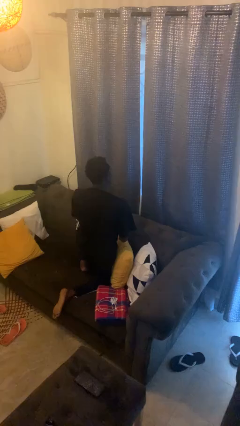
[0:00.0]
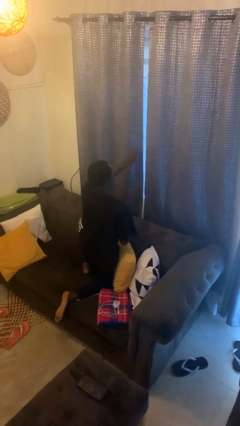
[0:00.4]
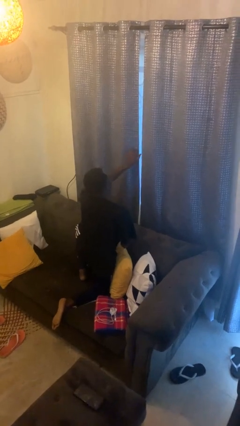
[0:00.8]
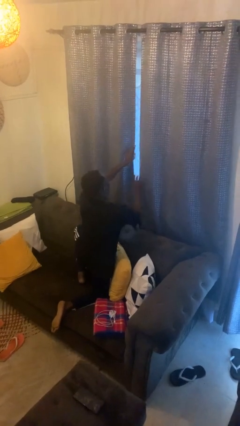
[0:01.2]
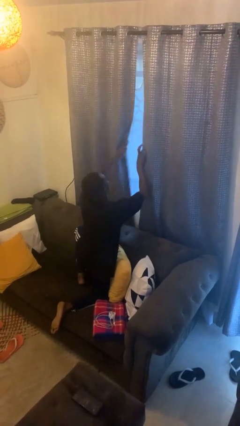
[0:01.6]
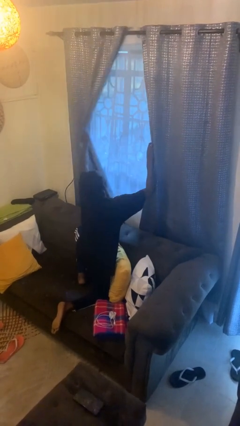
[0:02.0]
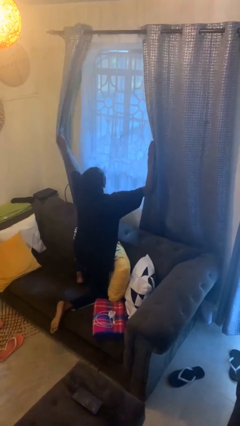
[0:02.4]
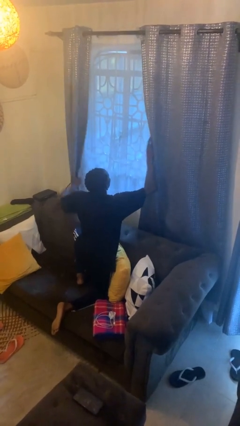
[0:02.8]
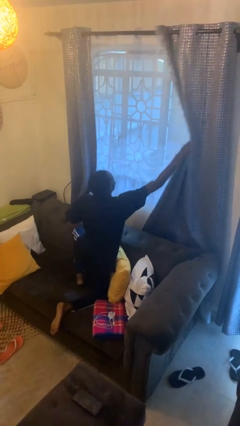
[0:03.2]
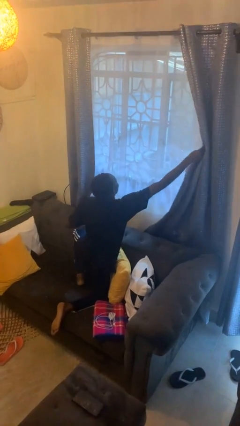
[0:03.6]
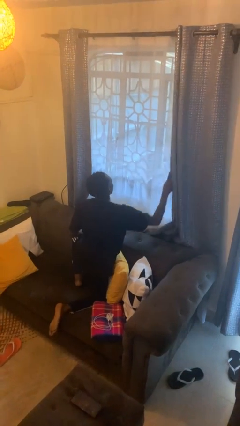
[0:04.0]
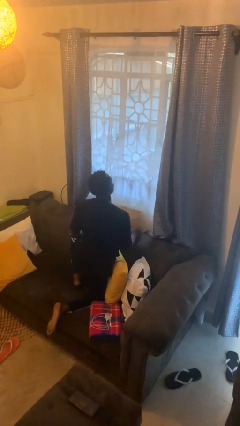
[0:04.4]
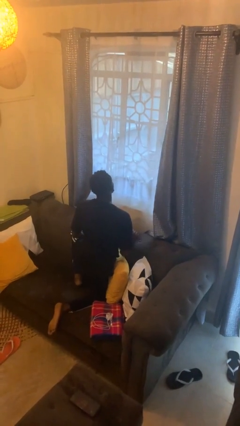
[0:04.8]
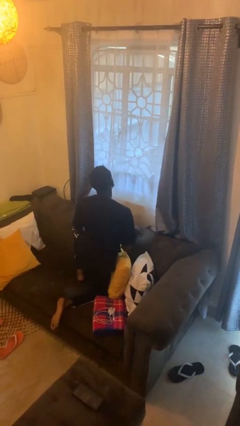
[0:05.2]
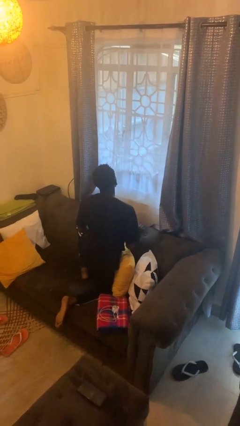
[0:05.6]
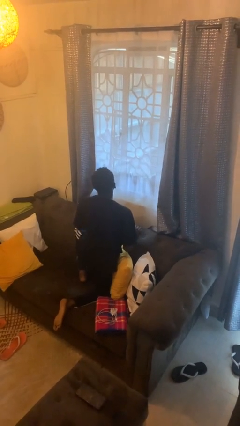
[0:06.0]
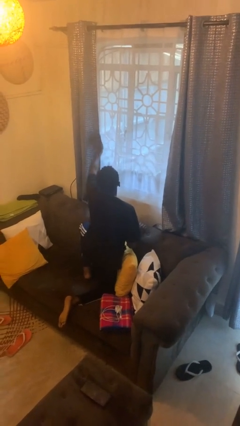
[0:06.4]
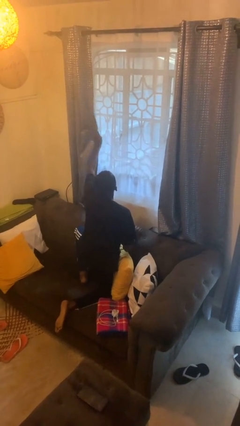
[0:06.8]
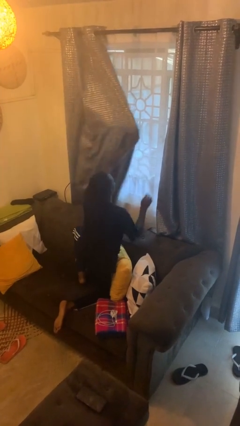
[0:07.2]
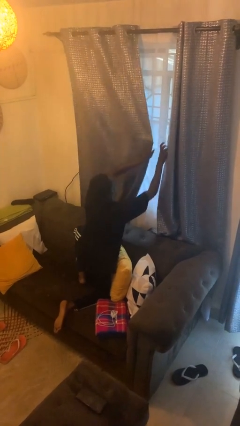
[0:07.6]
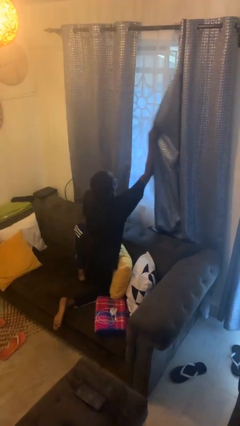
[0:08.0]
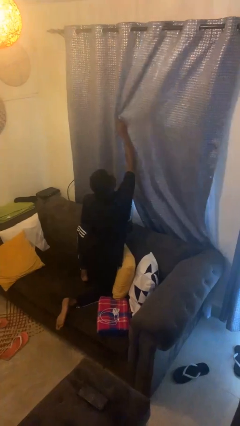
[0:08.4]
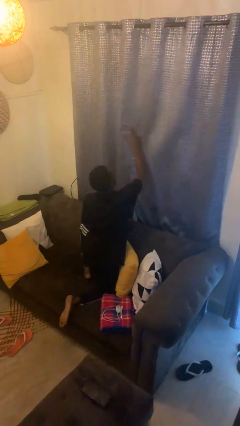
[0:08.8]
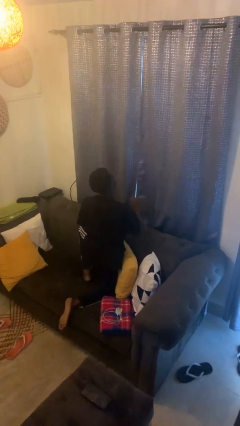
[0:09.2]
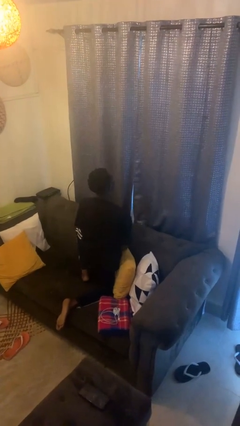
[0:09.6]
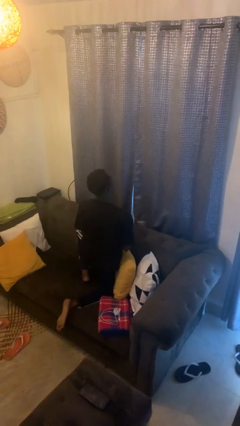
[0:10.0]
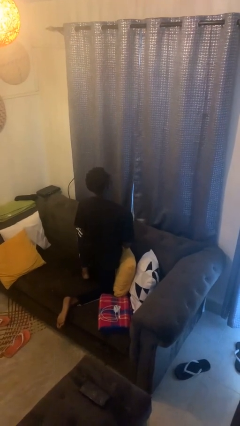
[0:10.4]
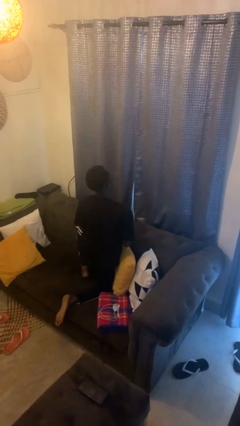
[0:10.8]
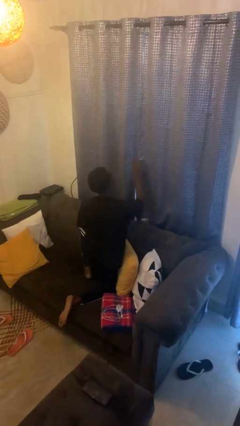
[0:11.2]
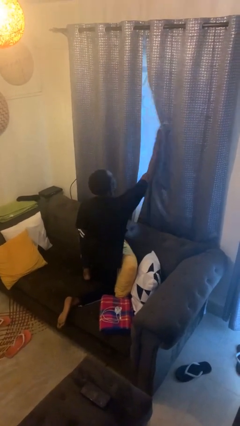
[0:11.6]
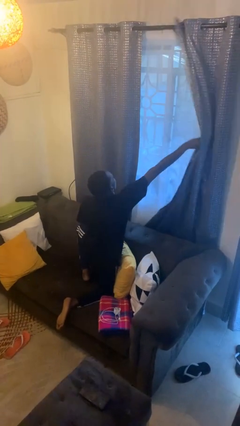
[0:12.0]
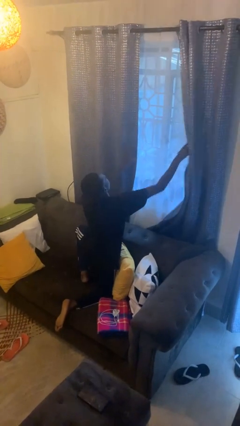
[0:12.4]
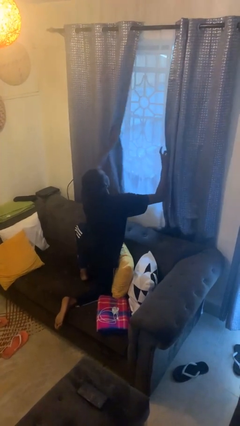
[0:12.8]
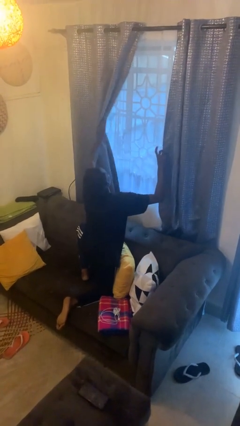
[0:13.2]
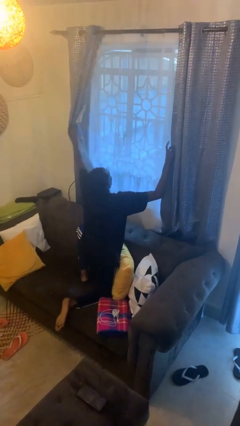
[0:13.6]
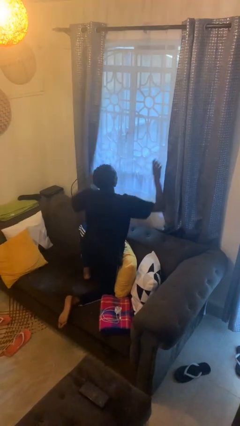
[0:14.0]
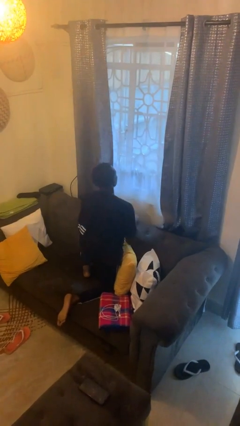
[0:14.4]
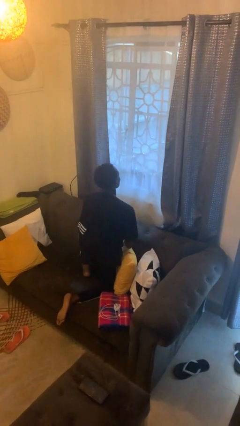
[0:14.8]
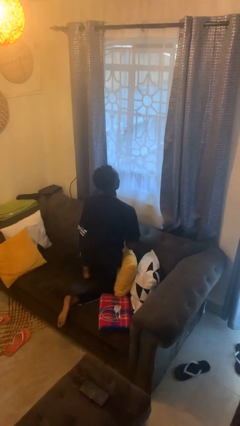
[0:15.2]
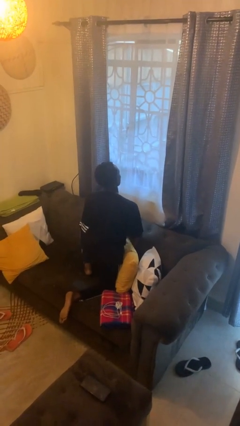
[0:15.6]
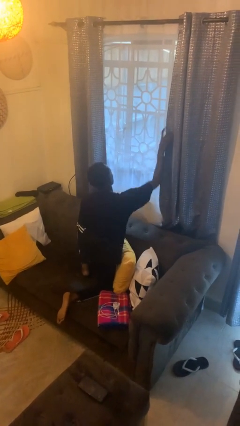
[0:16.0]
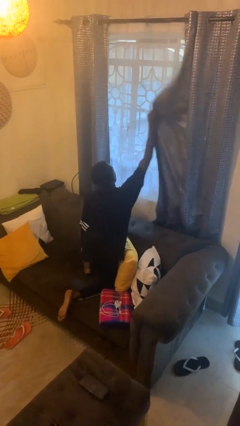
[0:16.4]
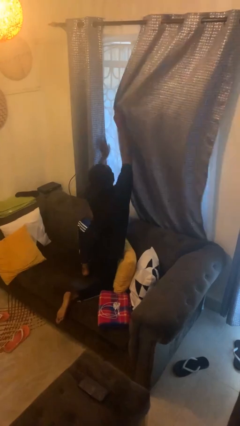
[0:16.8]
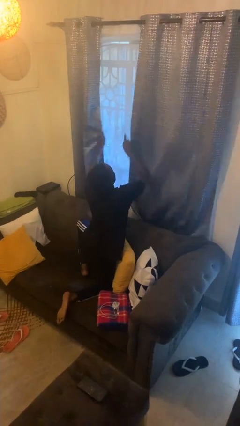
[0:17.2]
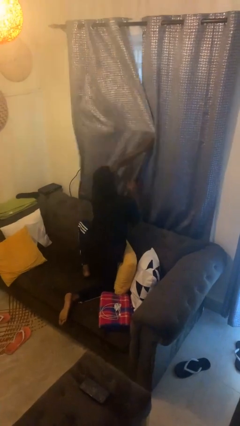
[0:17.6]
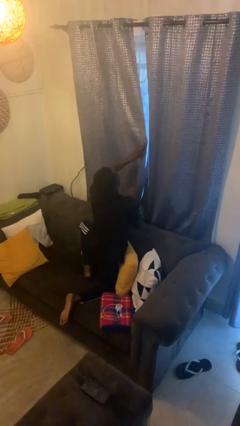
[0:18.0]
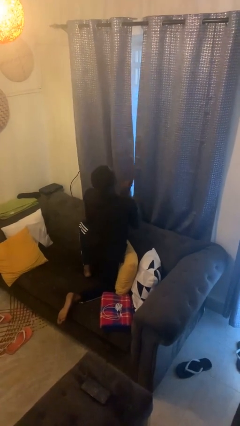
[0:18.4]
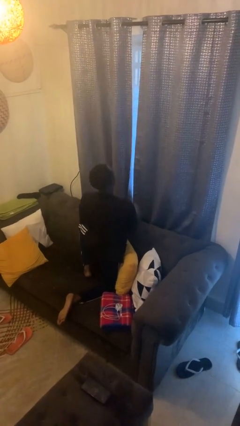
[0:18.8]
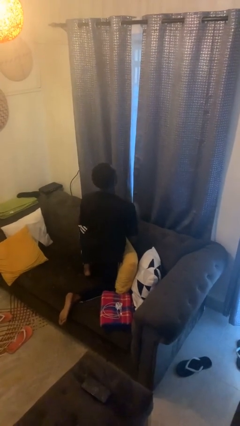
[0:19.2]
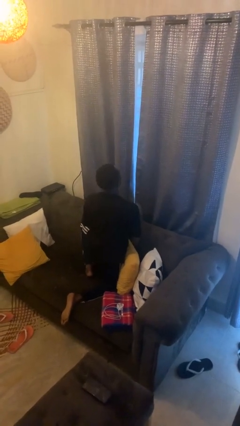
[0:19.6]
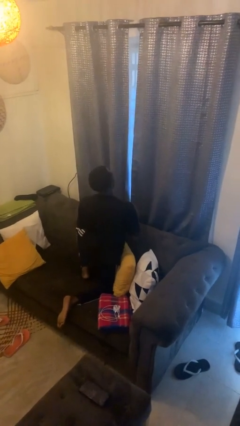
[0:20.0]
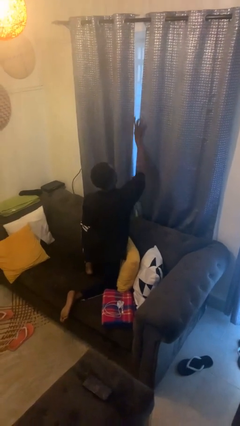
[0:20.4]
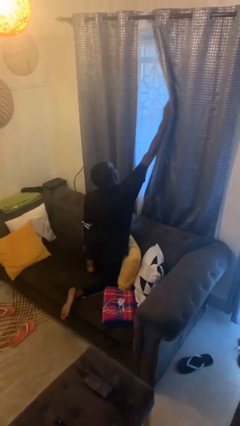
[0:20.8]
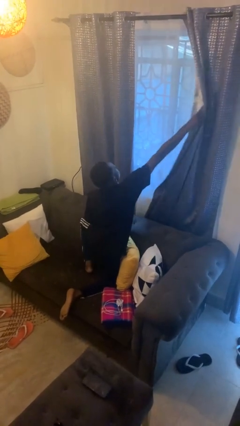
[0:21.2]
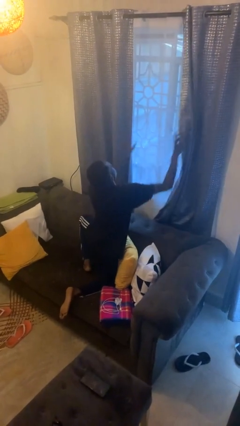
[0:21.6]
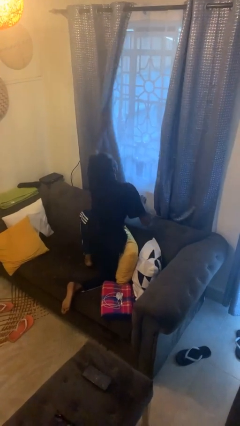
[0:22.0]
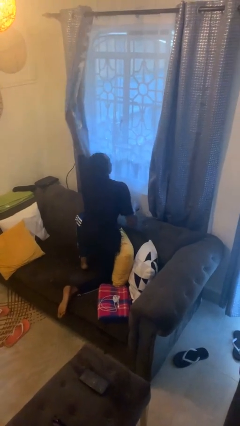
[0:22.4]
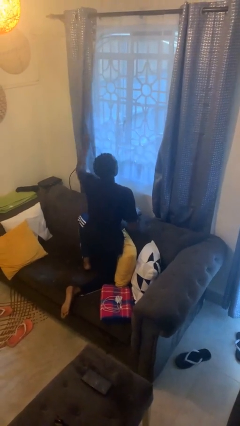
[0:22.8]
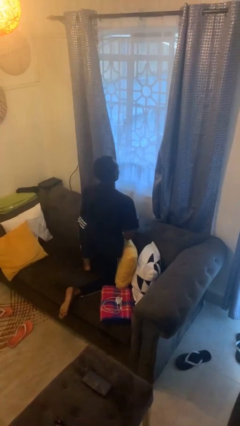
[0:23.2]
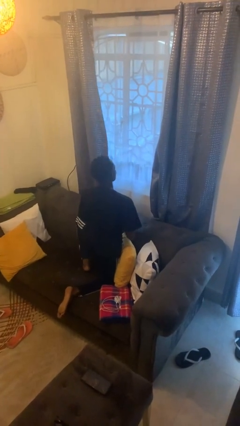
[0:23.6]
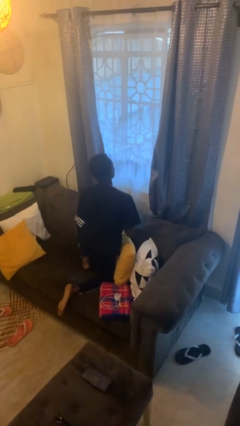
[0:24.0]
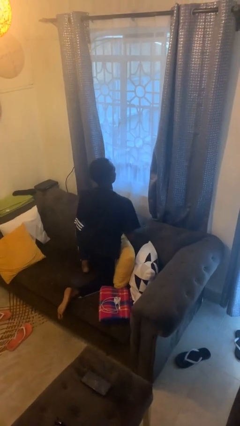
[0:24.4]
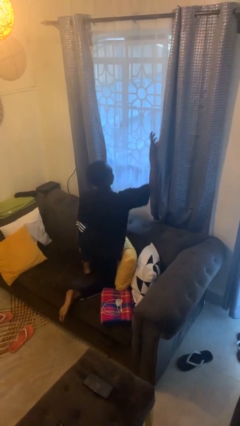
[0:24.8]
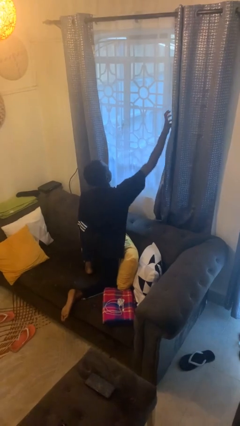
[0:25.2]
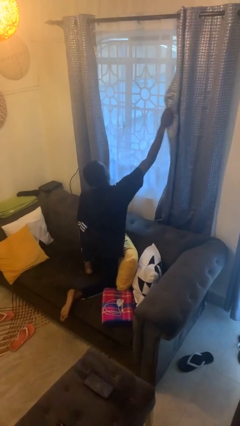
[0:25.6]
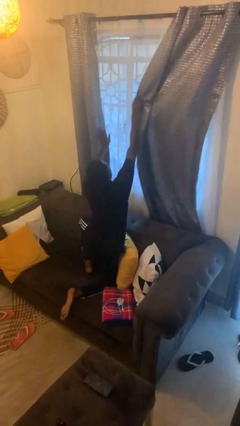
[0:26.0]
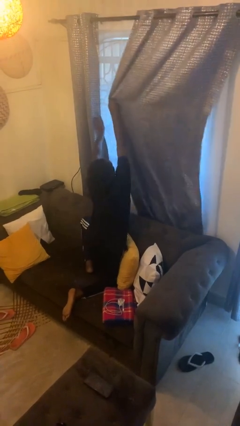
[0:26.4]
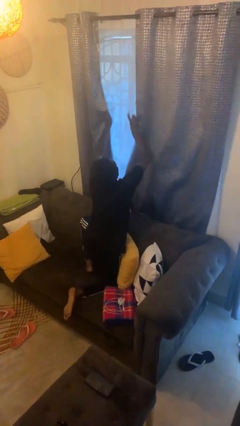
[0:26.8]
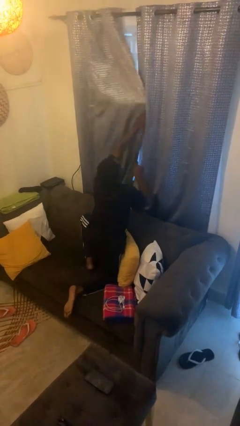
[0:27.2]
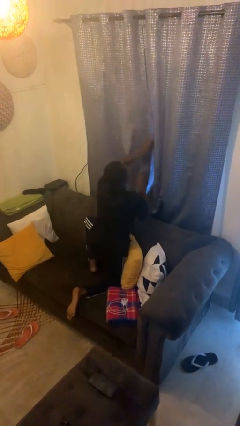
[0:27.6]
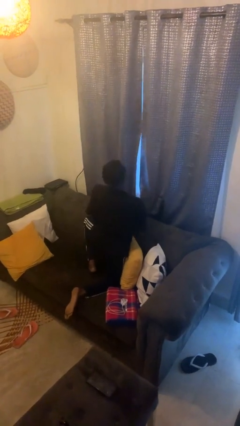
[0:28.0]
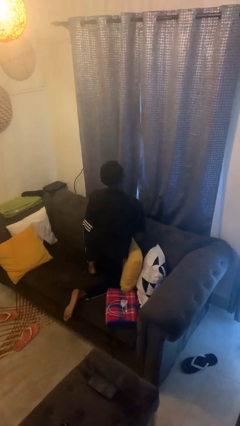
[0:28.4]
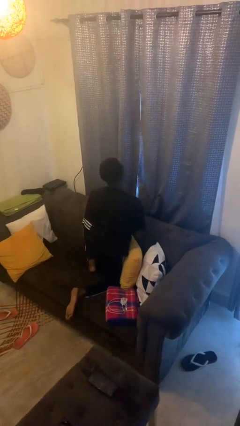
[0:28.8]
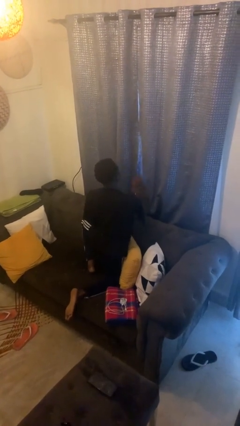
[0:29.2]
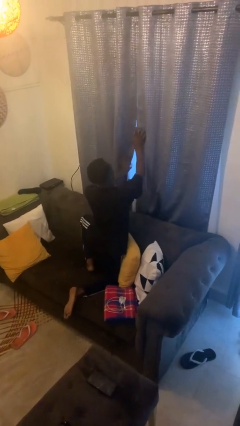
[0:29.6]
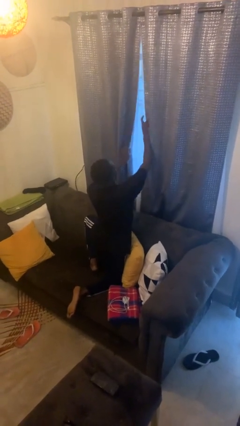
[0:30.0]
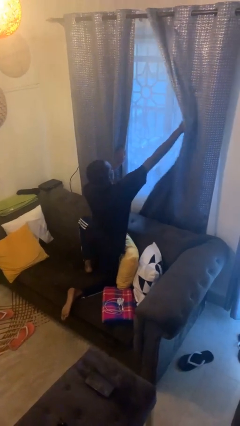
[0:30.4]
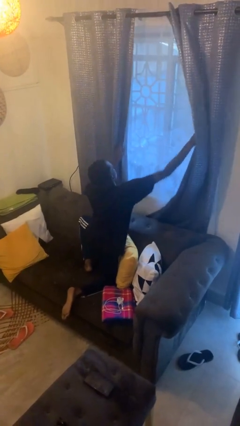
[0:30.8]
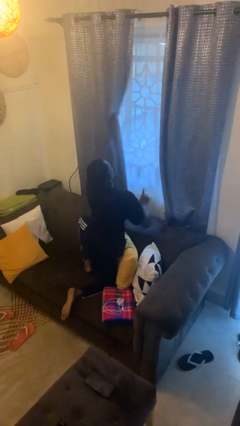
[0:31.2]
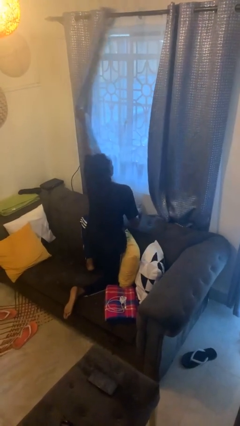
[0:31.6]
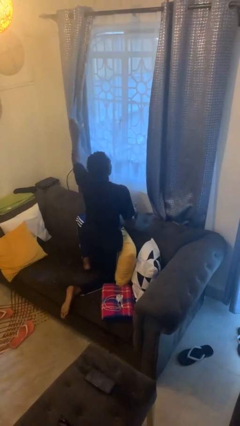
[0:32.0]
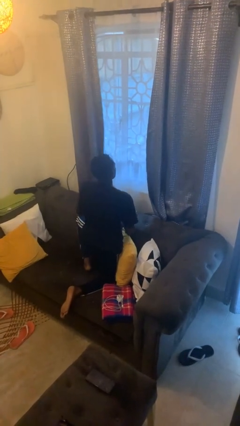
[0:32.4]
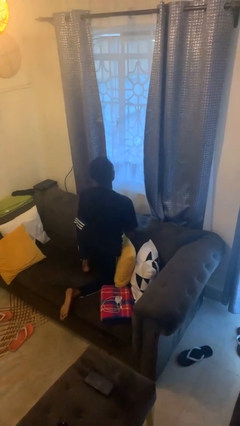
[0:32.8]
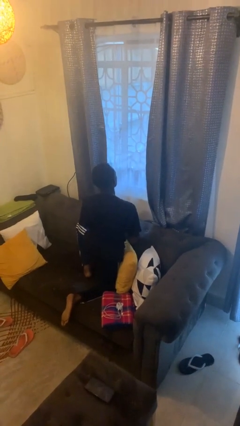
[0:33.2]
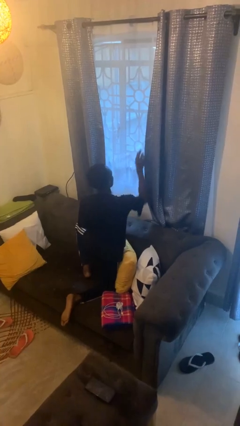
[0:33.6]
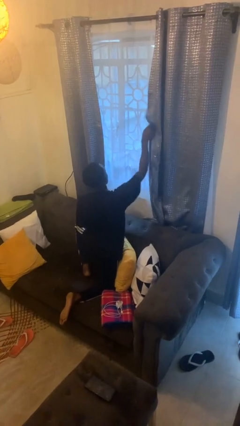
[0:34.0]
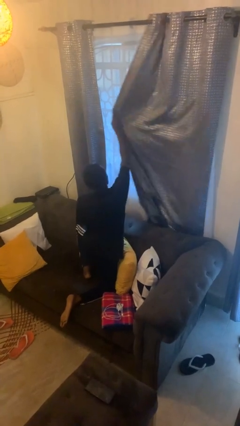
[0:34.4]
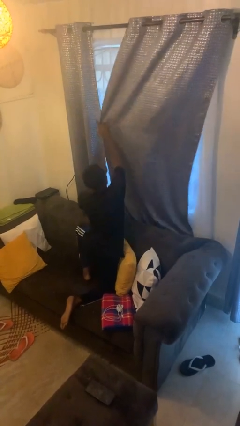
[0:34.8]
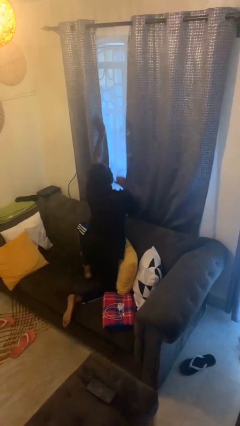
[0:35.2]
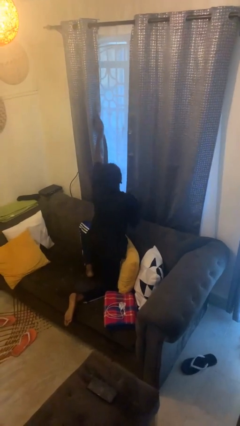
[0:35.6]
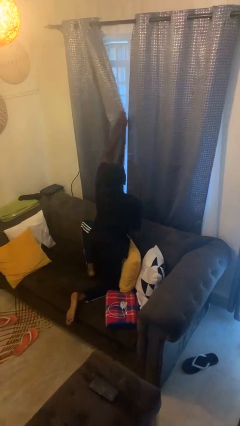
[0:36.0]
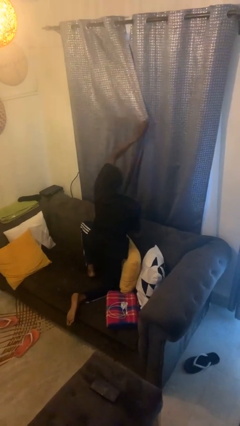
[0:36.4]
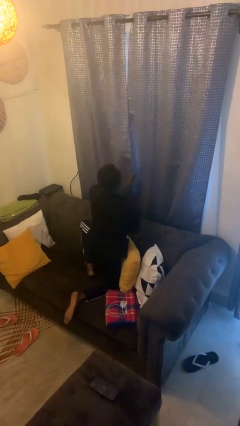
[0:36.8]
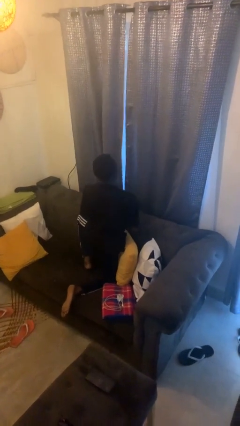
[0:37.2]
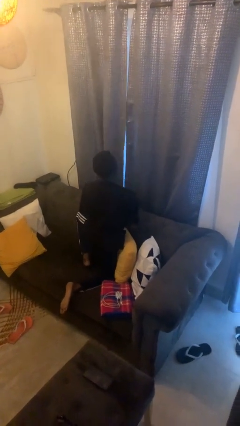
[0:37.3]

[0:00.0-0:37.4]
person opens curtains
